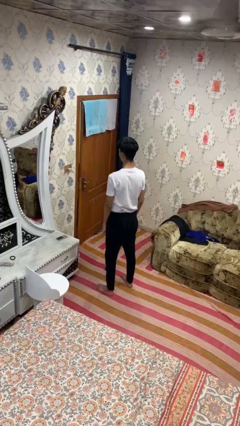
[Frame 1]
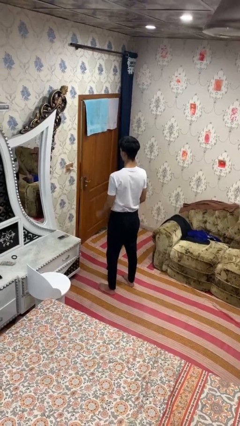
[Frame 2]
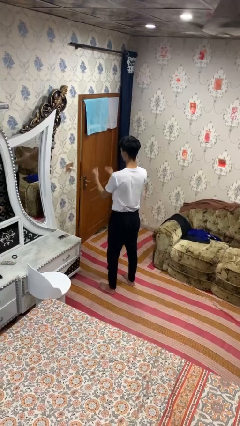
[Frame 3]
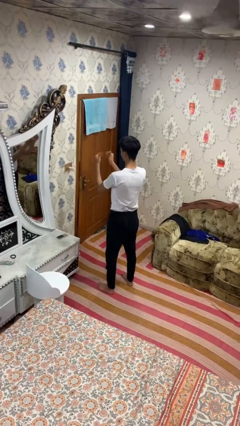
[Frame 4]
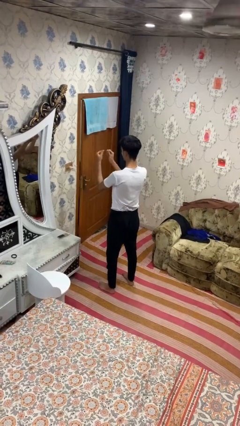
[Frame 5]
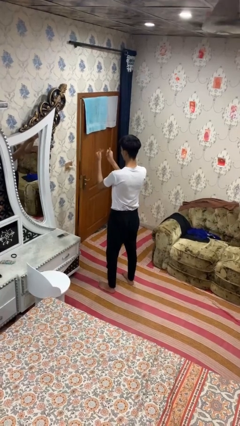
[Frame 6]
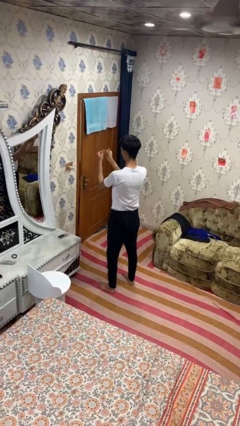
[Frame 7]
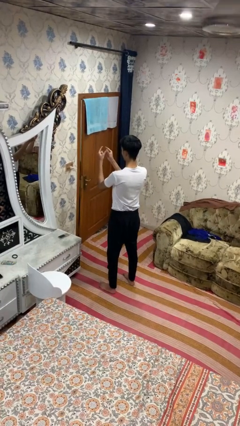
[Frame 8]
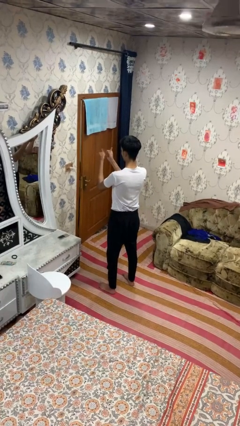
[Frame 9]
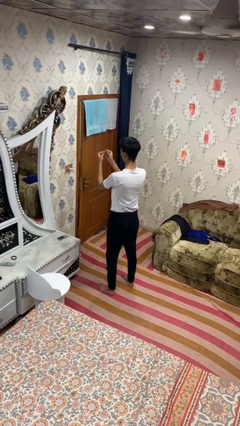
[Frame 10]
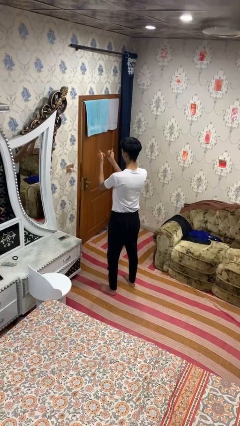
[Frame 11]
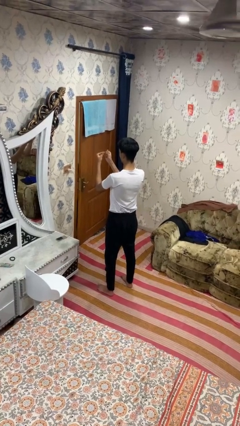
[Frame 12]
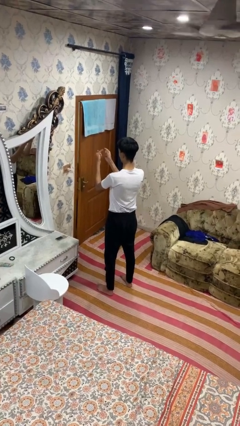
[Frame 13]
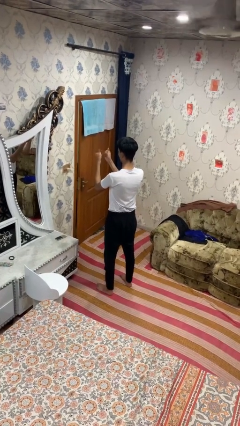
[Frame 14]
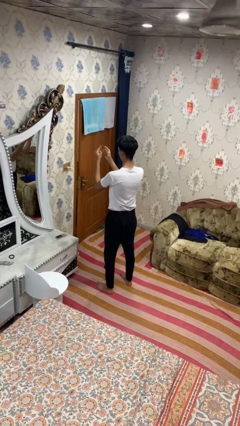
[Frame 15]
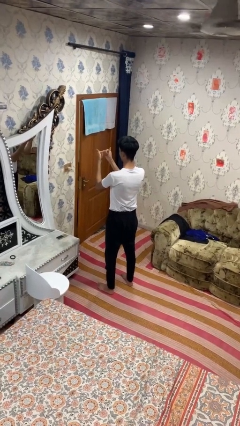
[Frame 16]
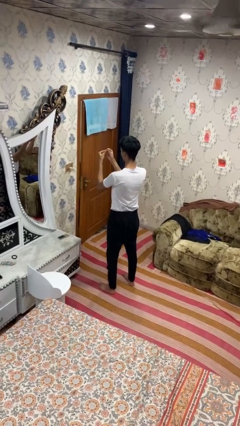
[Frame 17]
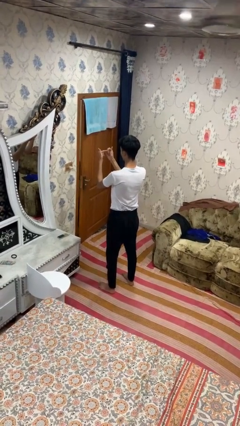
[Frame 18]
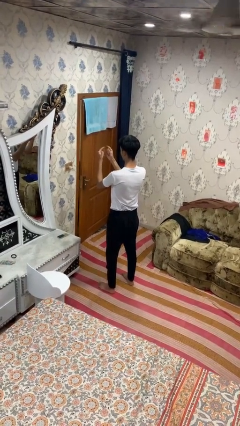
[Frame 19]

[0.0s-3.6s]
person snaps fingers

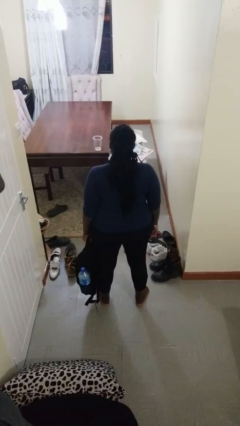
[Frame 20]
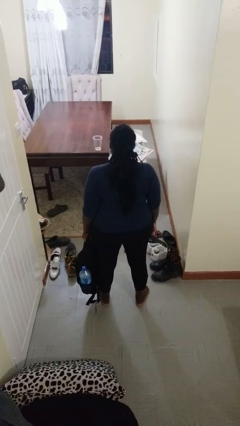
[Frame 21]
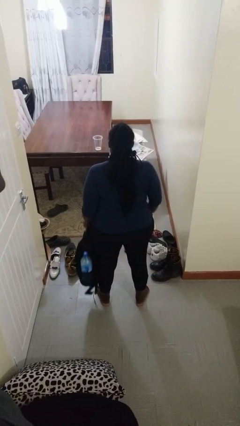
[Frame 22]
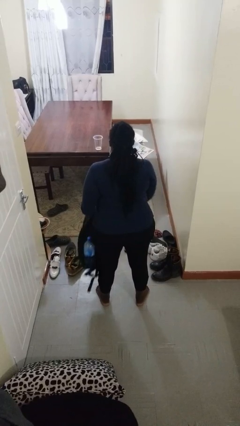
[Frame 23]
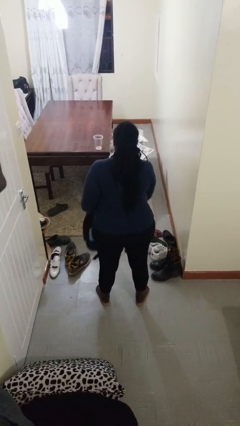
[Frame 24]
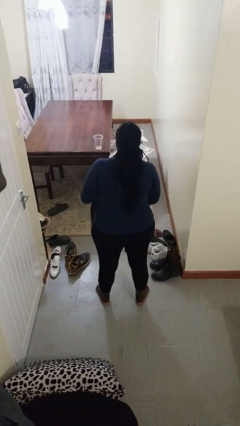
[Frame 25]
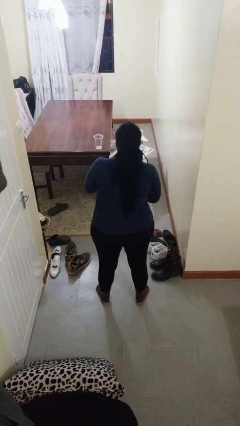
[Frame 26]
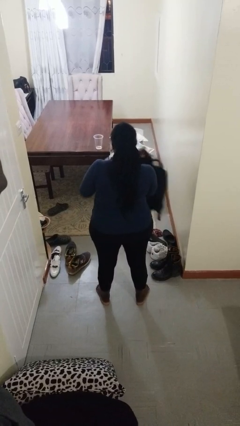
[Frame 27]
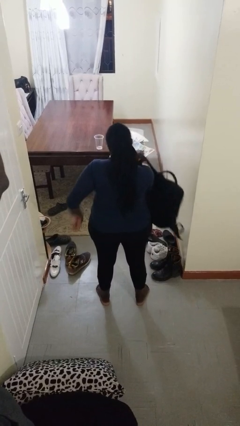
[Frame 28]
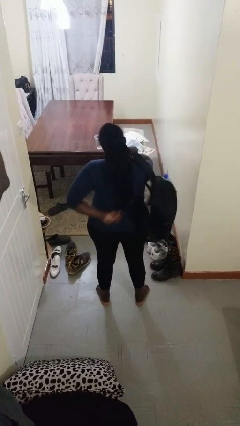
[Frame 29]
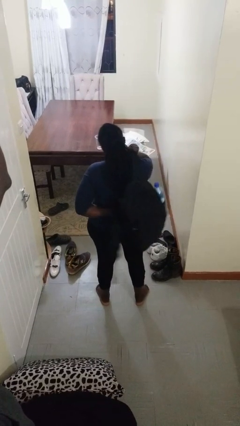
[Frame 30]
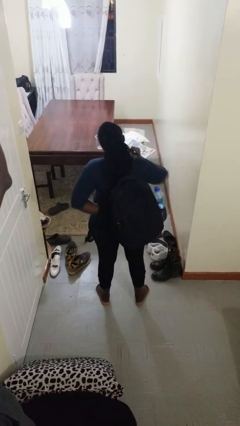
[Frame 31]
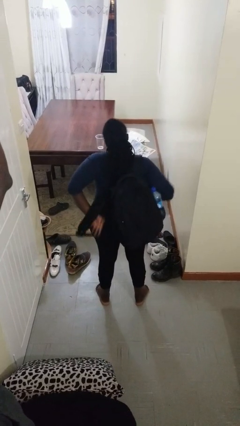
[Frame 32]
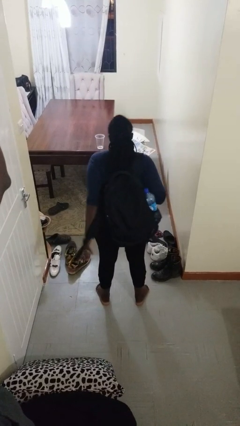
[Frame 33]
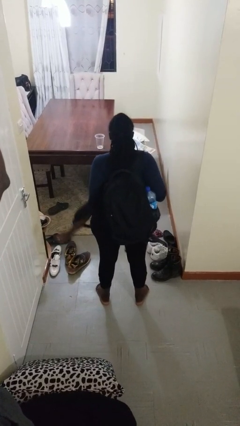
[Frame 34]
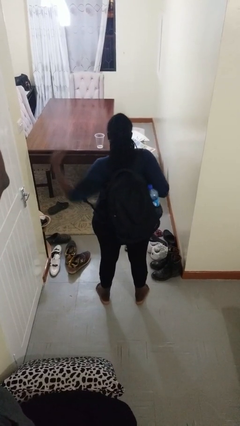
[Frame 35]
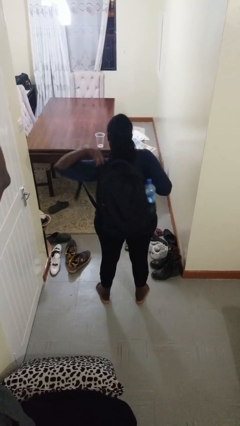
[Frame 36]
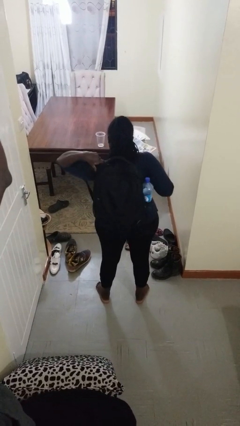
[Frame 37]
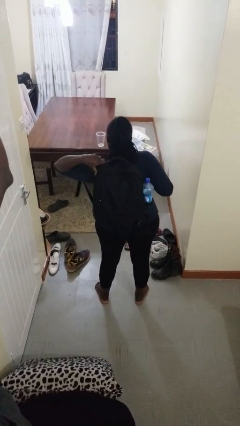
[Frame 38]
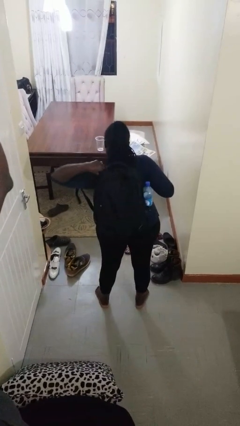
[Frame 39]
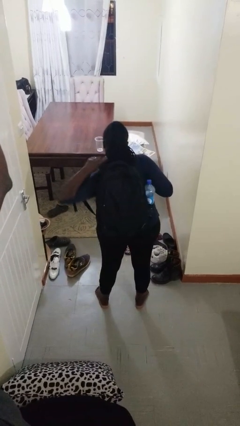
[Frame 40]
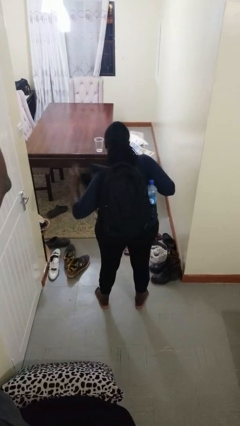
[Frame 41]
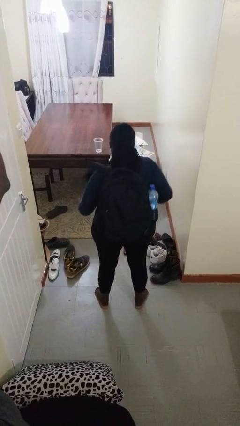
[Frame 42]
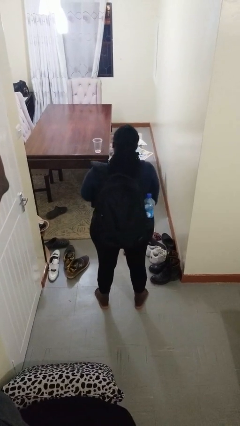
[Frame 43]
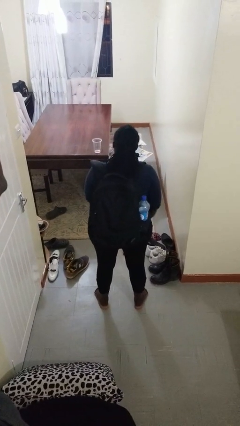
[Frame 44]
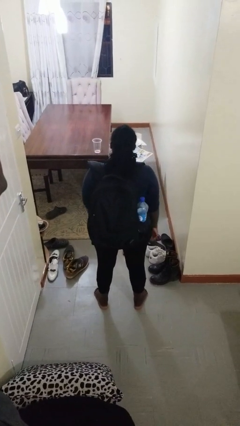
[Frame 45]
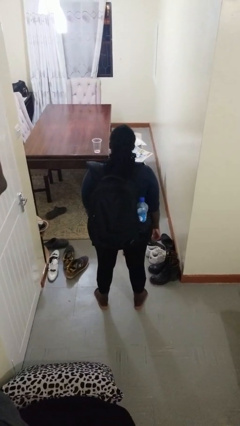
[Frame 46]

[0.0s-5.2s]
person puts on backpack

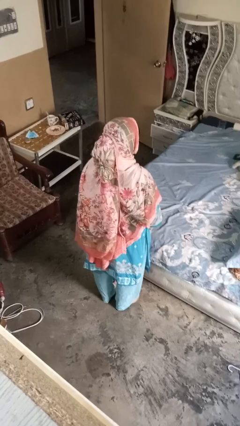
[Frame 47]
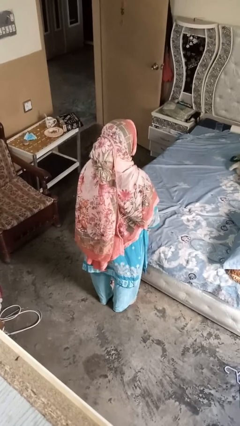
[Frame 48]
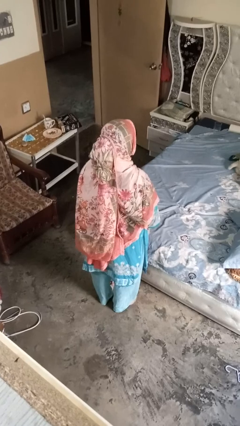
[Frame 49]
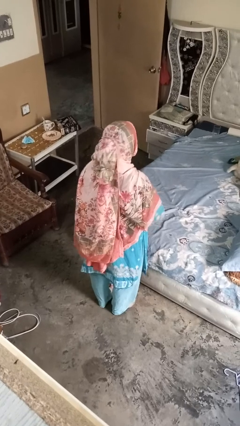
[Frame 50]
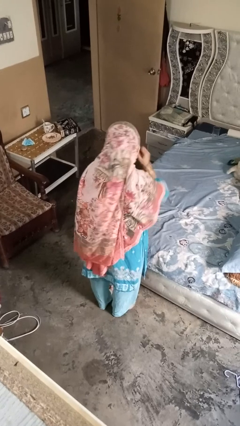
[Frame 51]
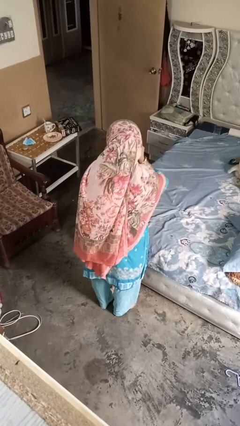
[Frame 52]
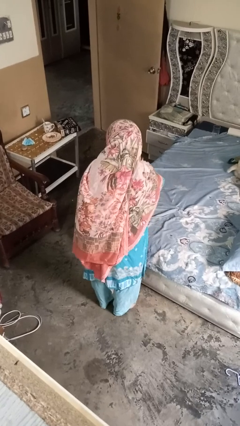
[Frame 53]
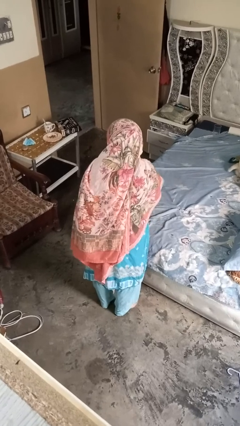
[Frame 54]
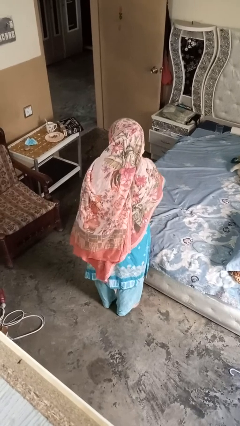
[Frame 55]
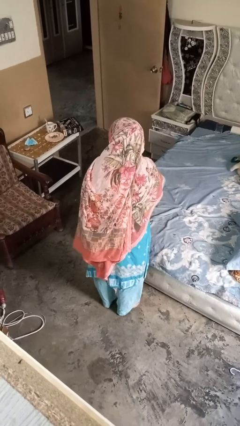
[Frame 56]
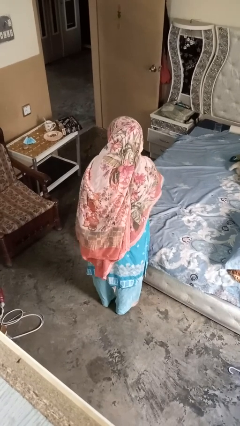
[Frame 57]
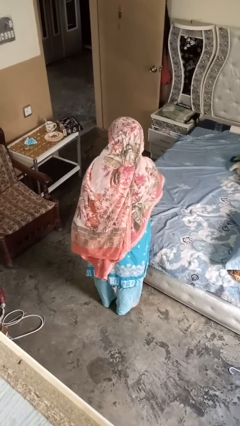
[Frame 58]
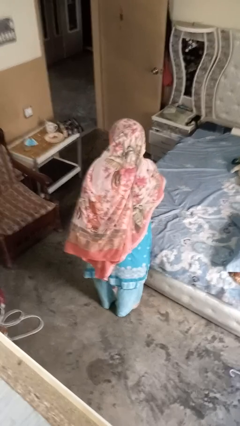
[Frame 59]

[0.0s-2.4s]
person gestures listen closely

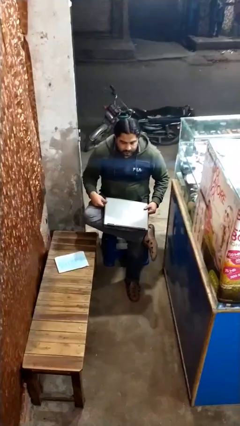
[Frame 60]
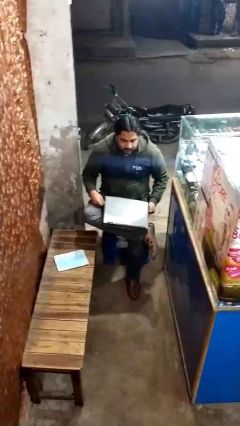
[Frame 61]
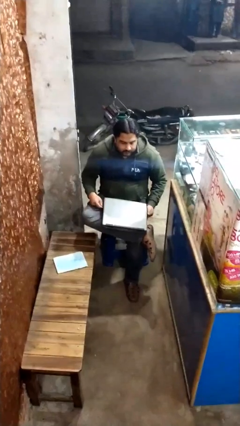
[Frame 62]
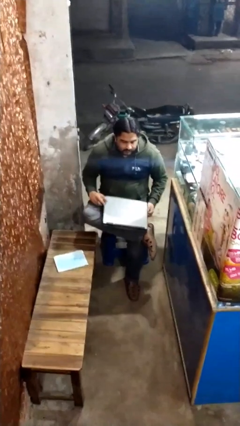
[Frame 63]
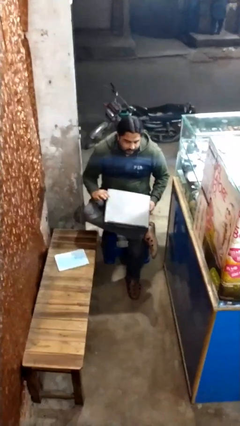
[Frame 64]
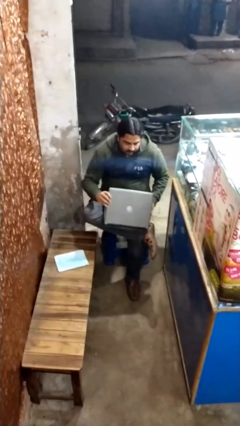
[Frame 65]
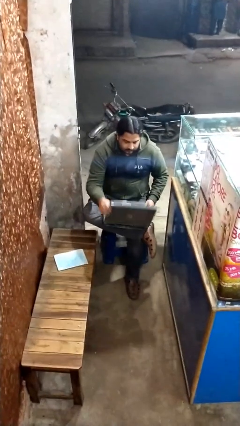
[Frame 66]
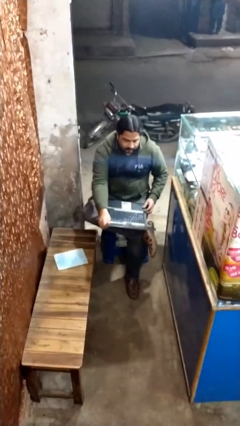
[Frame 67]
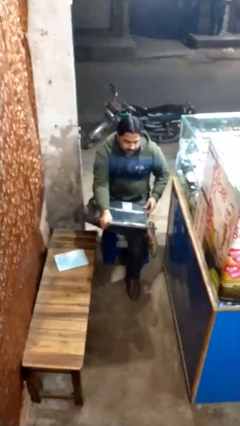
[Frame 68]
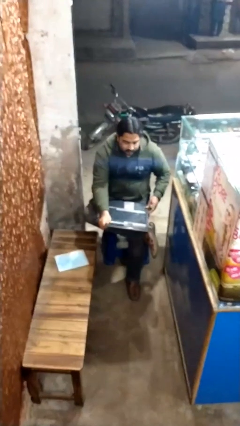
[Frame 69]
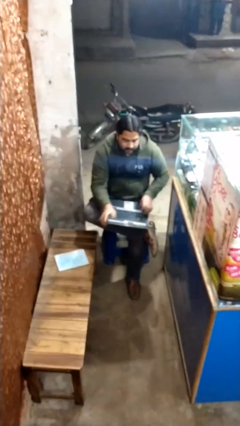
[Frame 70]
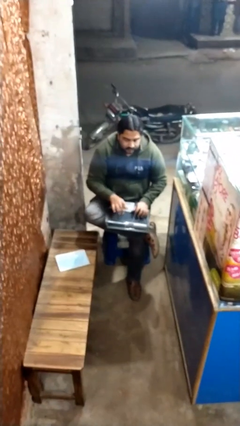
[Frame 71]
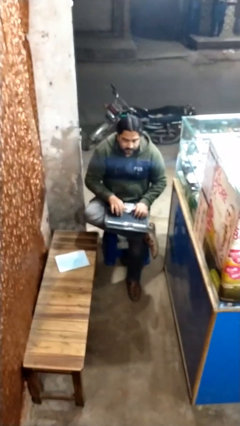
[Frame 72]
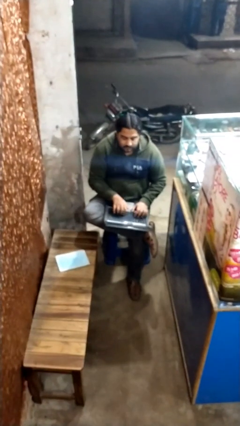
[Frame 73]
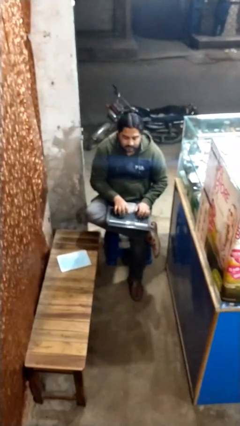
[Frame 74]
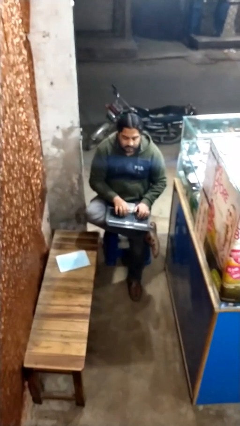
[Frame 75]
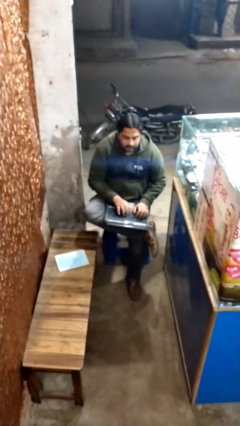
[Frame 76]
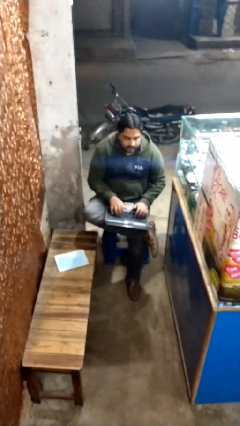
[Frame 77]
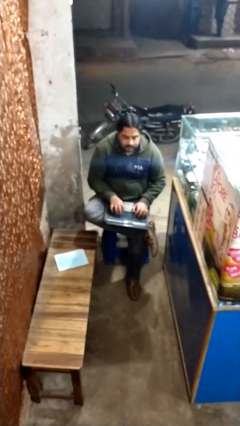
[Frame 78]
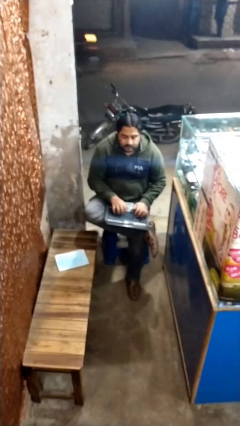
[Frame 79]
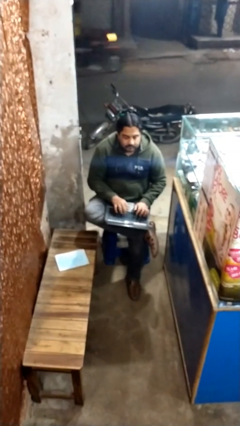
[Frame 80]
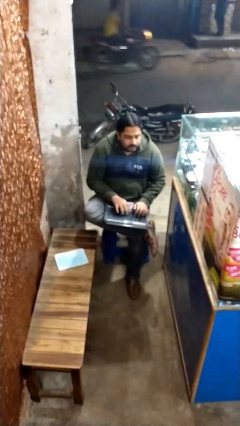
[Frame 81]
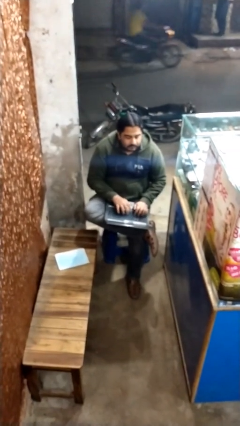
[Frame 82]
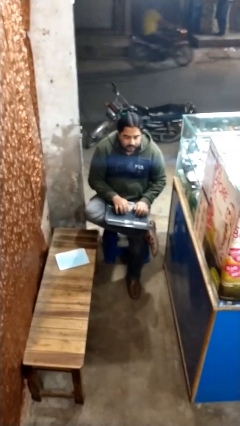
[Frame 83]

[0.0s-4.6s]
person interacts with laptop

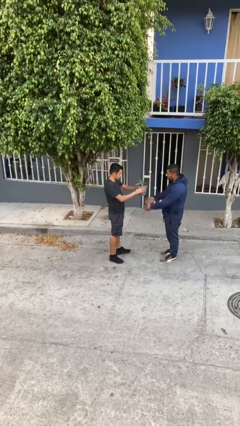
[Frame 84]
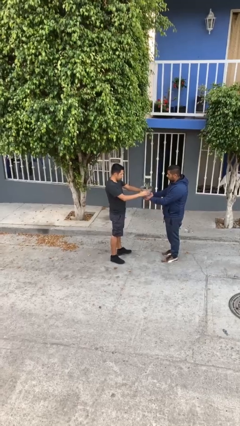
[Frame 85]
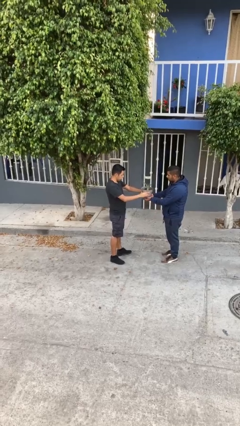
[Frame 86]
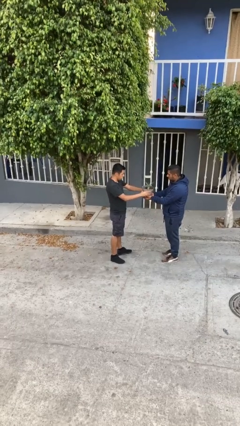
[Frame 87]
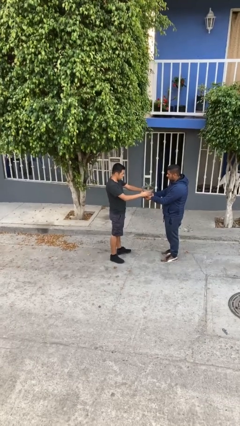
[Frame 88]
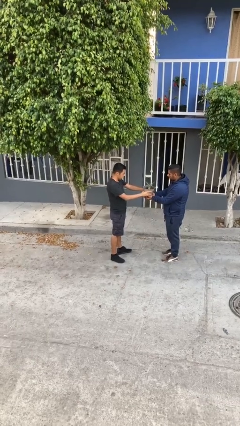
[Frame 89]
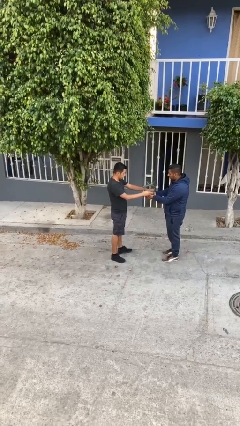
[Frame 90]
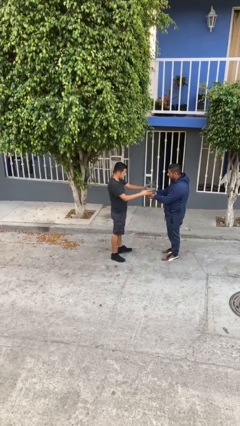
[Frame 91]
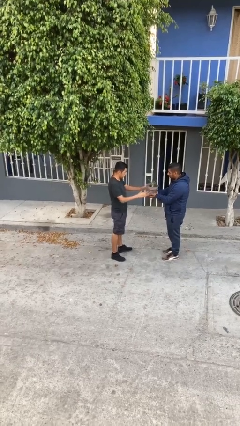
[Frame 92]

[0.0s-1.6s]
person transfers object to person

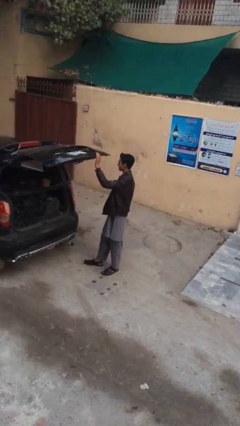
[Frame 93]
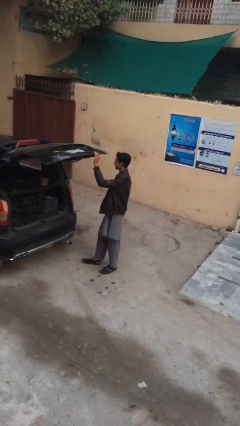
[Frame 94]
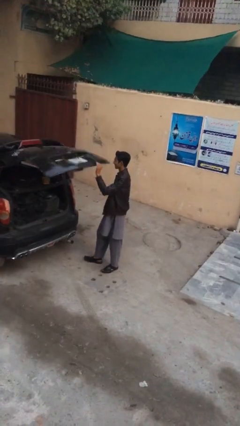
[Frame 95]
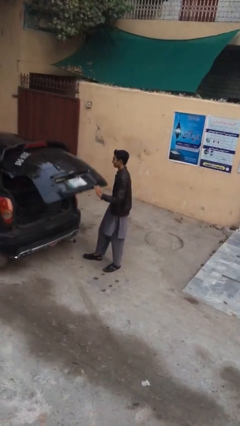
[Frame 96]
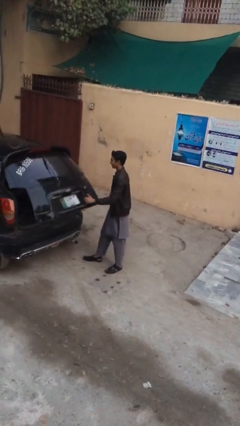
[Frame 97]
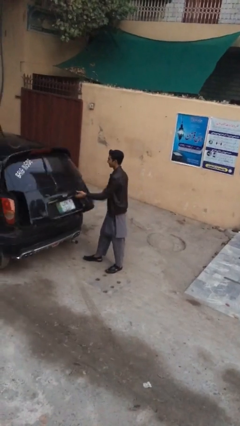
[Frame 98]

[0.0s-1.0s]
person closes car trunk
